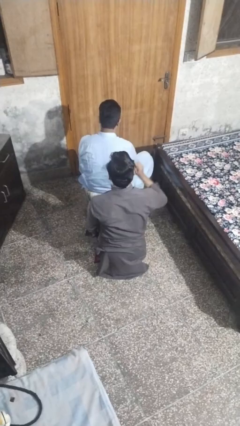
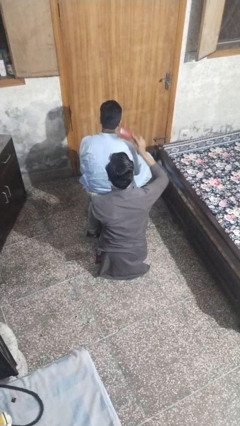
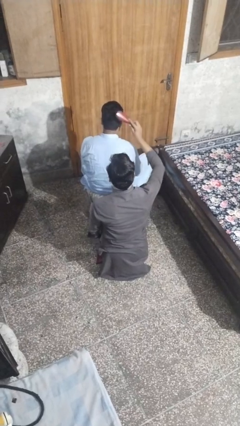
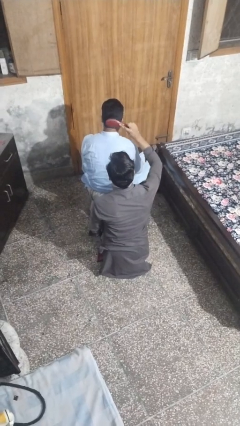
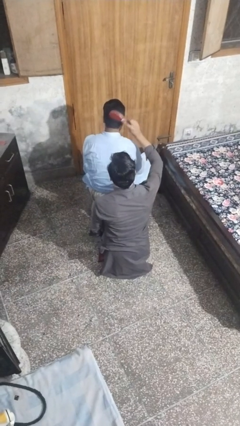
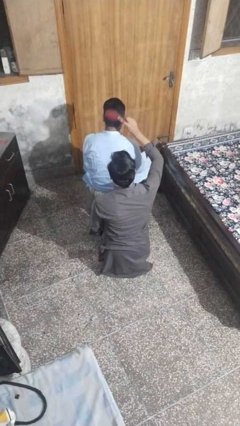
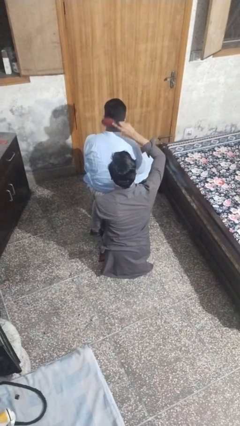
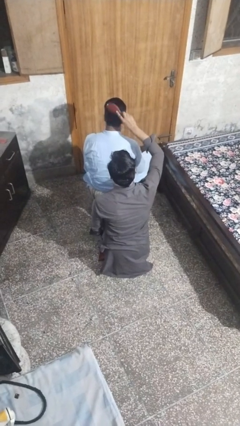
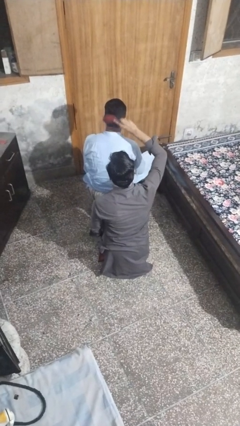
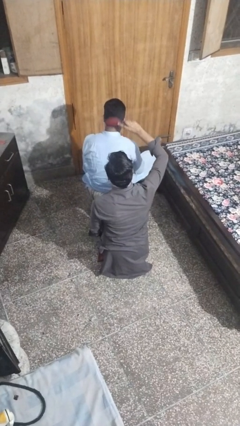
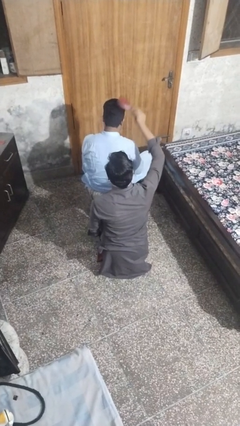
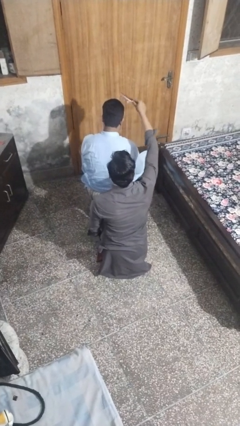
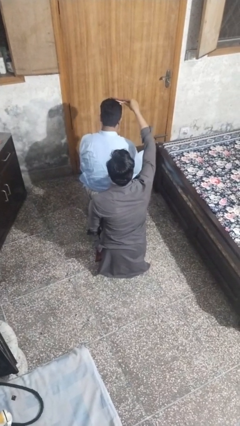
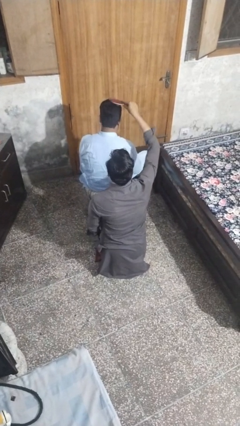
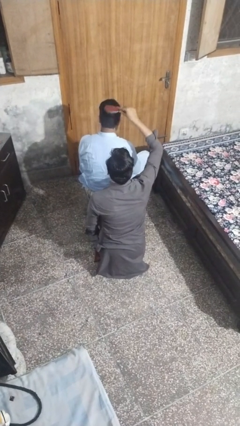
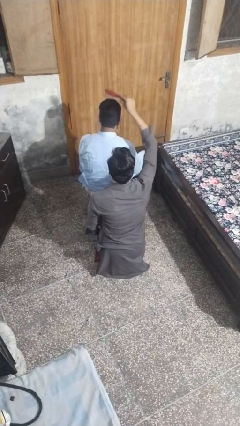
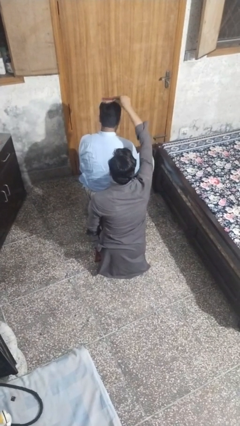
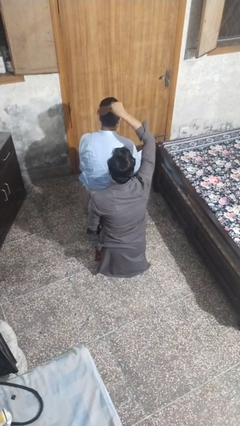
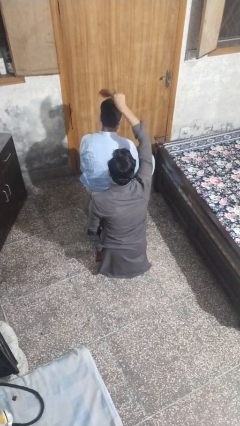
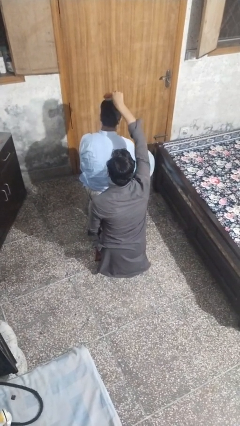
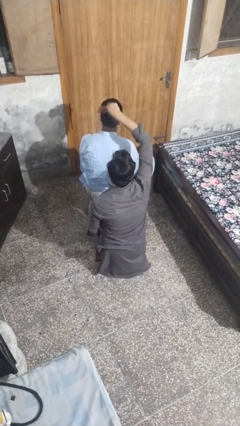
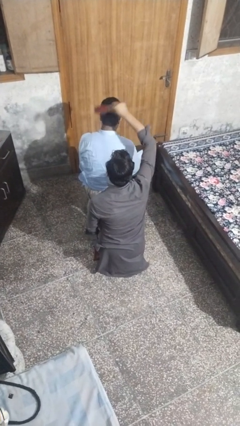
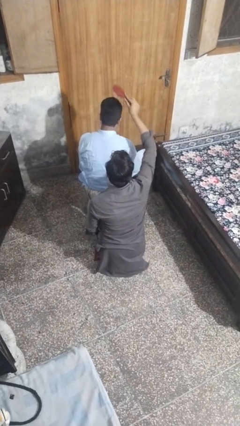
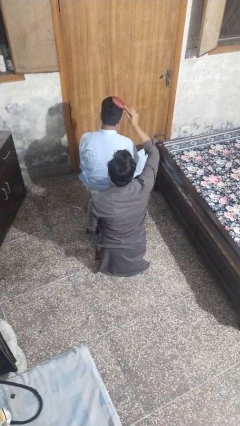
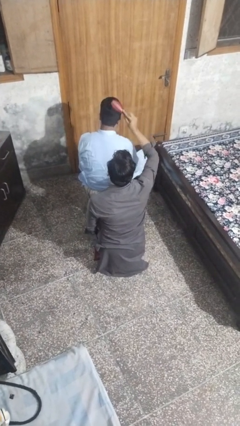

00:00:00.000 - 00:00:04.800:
person brushes hair of person

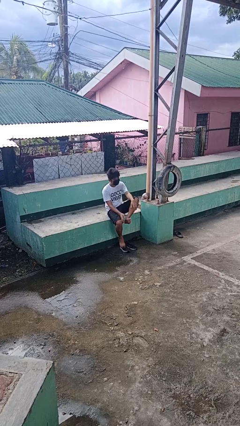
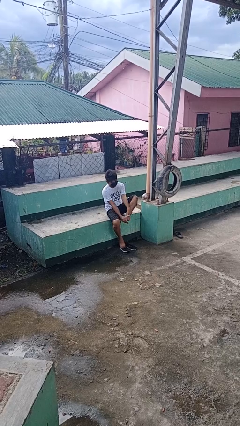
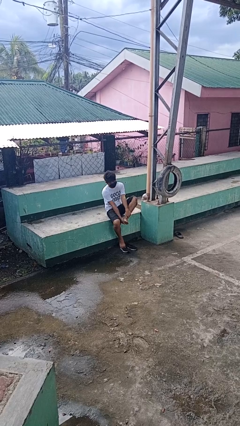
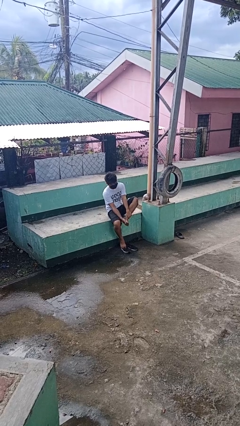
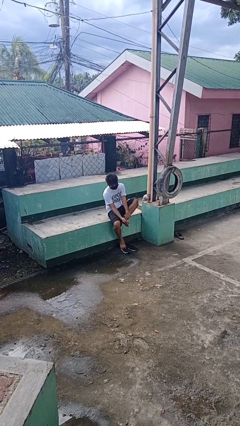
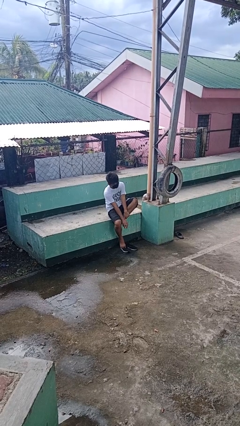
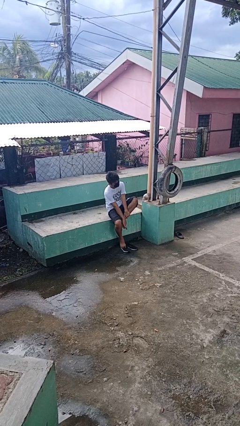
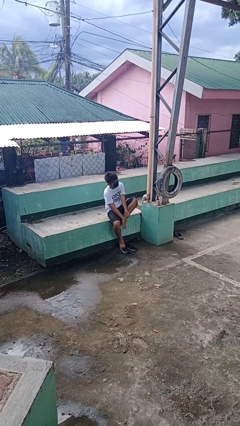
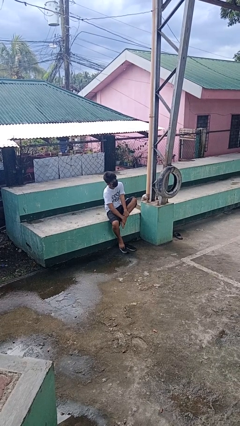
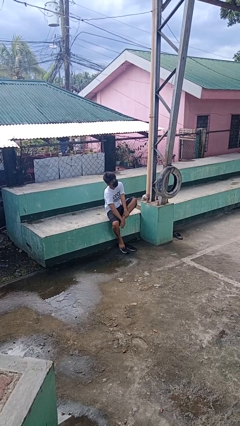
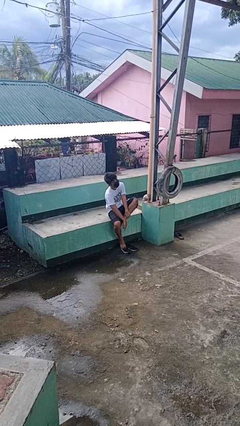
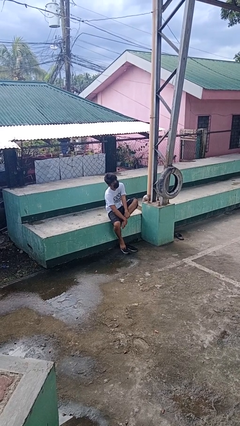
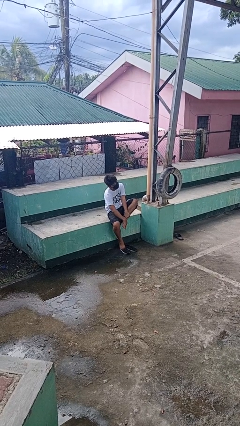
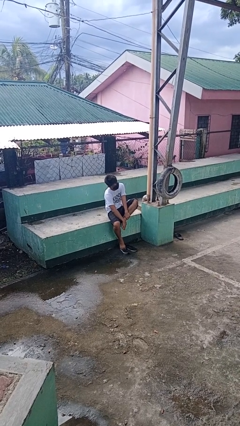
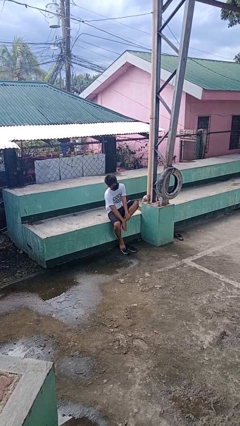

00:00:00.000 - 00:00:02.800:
person rubs foot

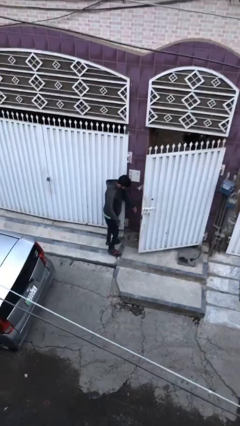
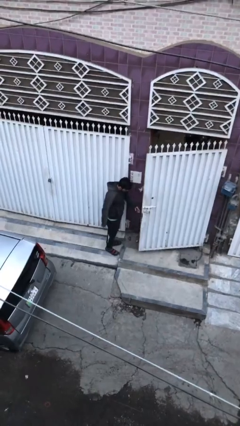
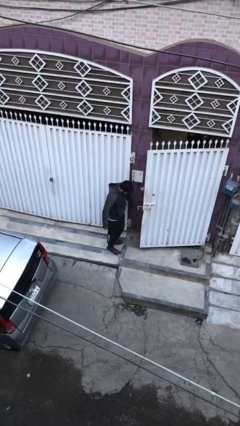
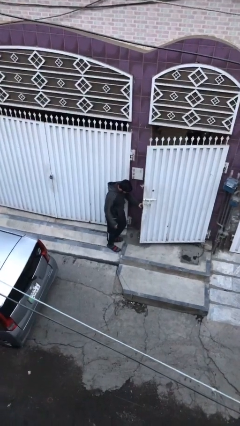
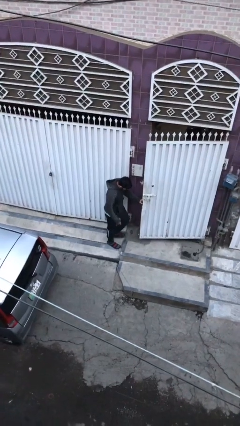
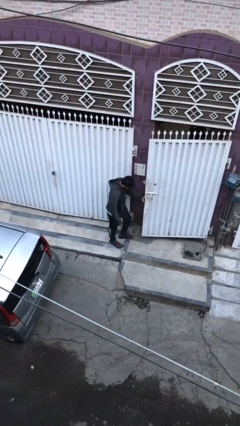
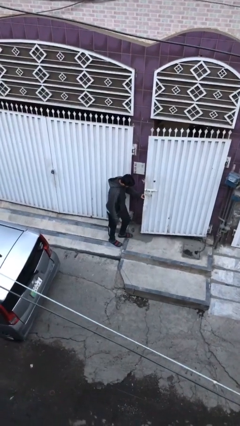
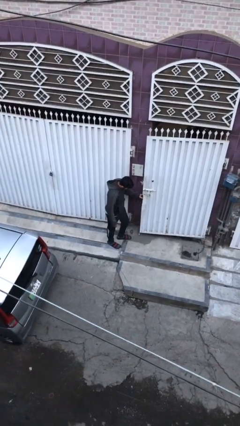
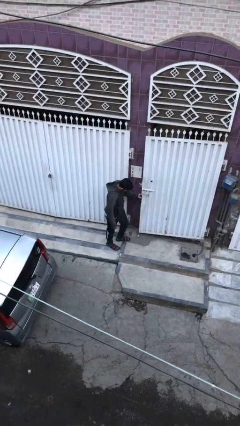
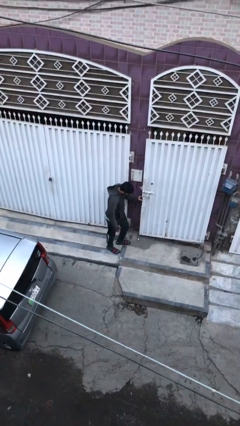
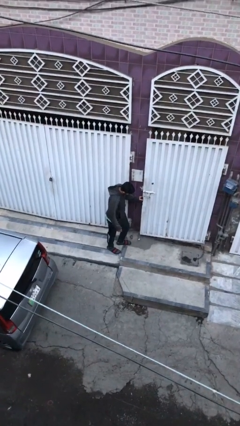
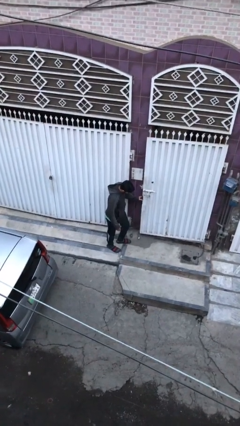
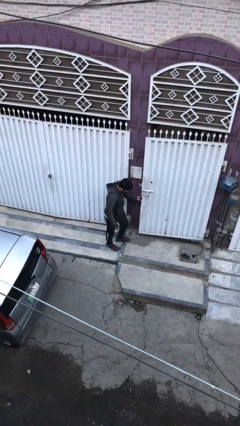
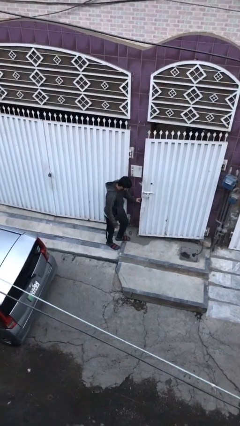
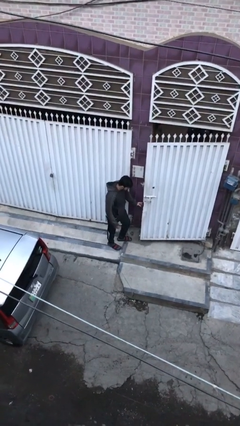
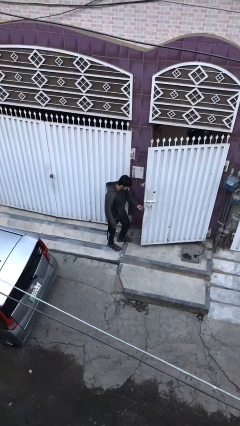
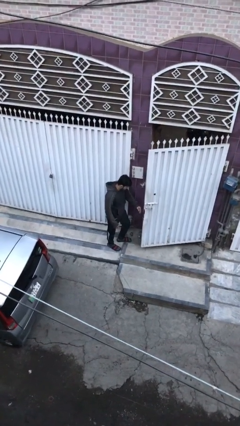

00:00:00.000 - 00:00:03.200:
person closes facility door

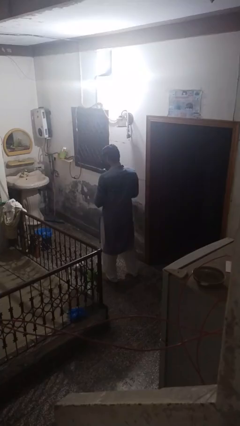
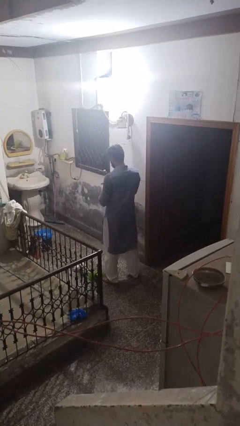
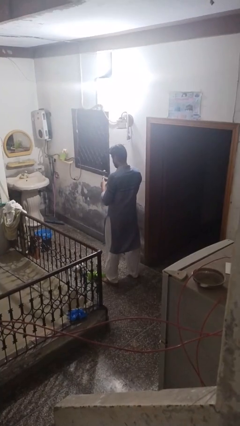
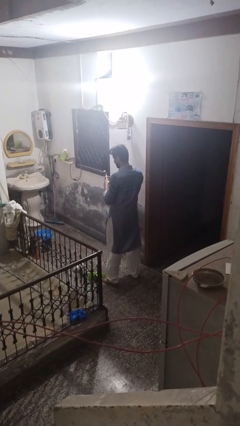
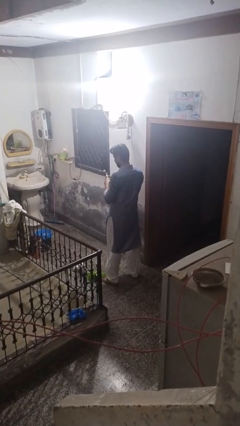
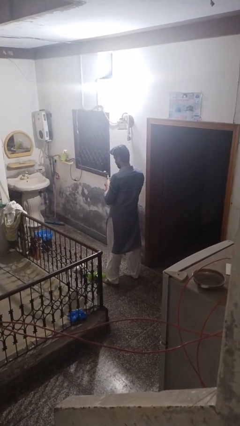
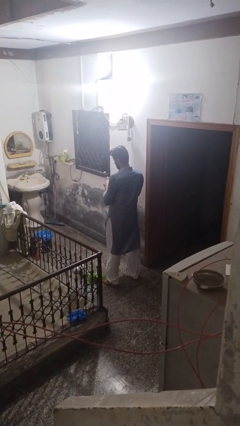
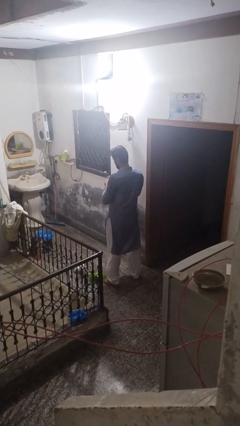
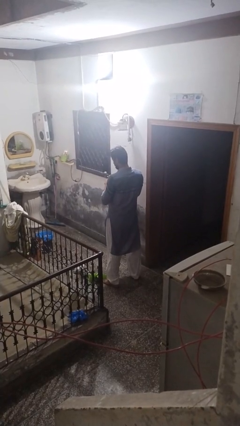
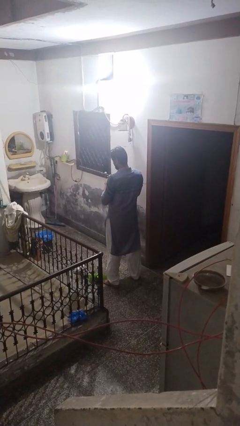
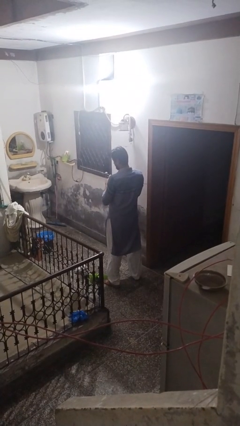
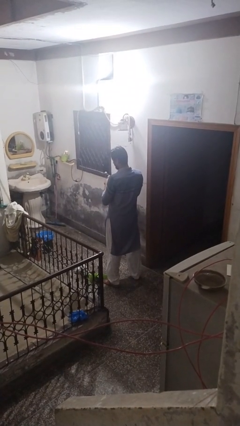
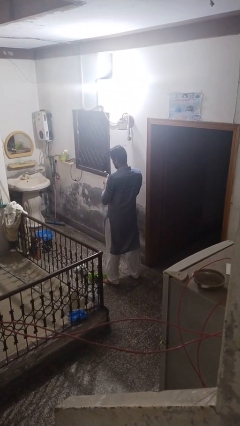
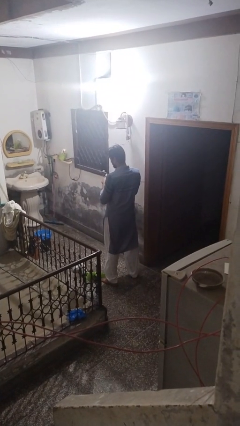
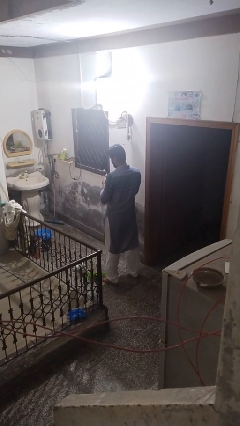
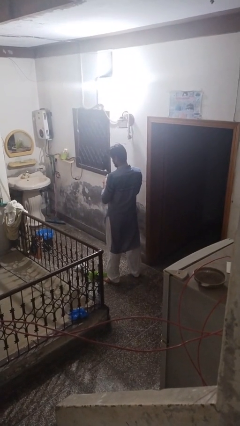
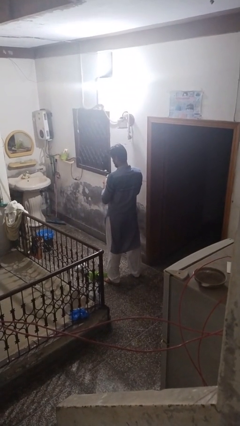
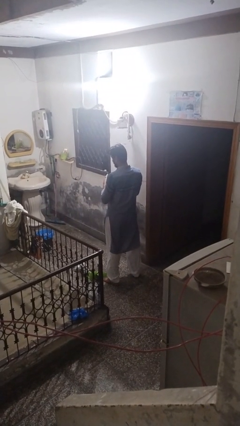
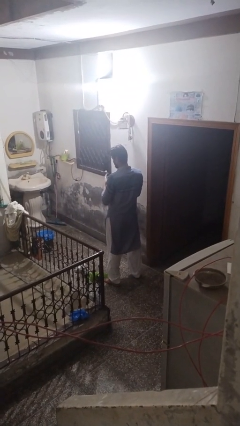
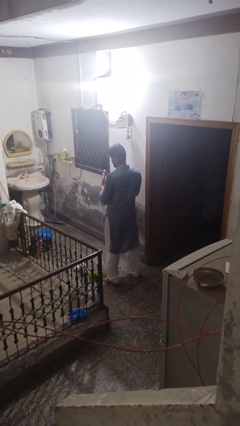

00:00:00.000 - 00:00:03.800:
person puts on ring

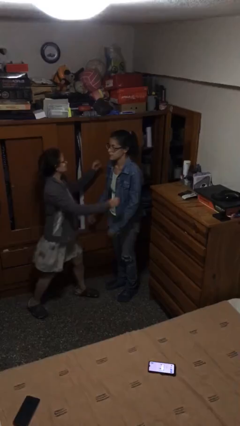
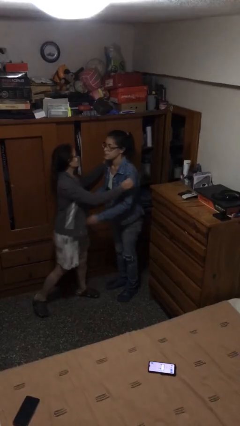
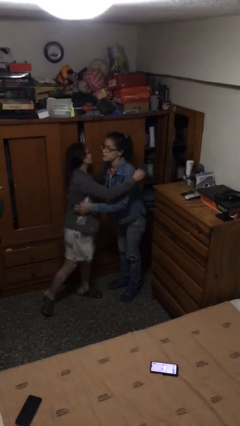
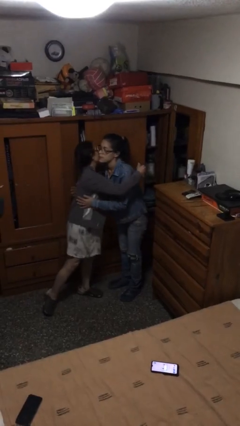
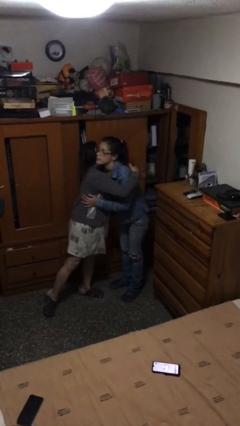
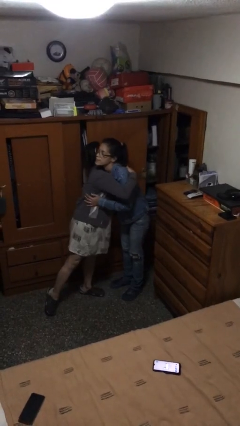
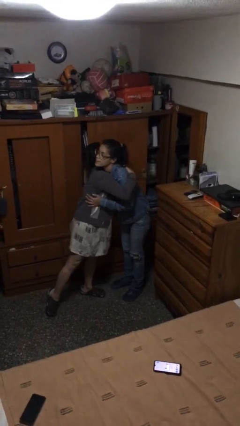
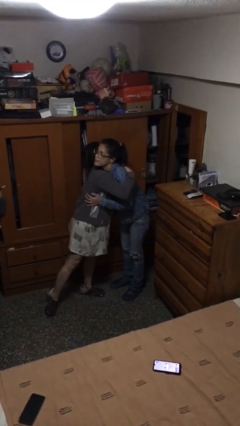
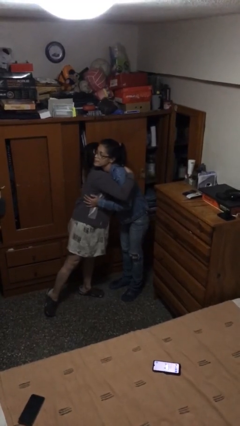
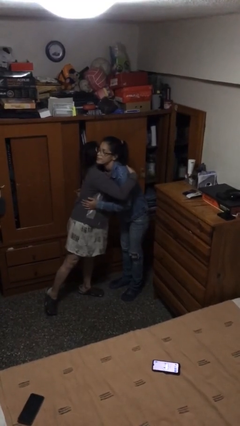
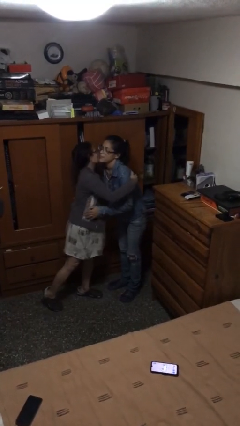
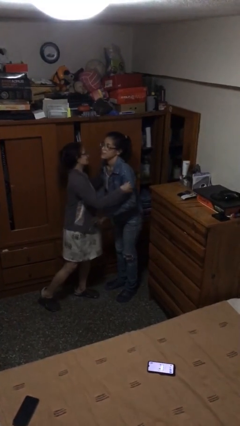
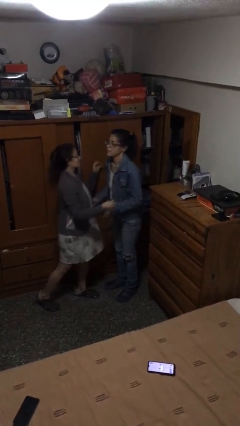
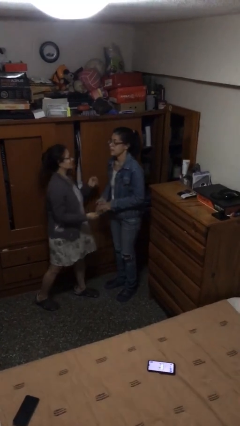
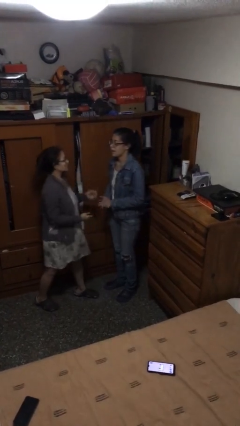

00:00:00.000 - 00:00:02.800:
person embraces person

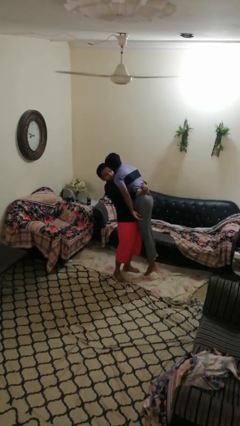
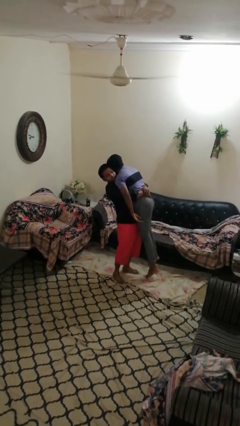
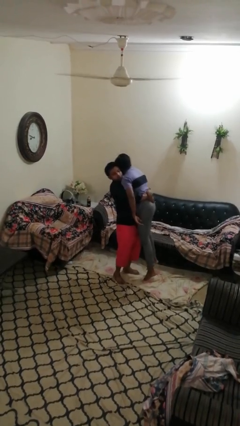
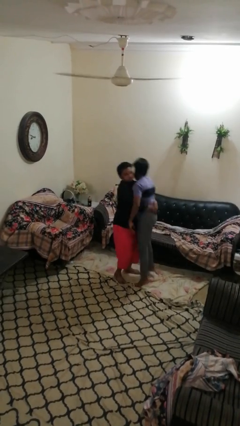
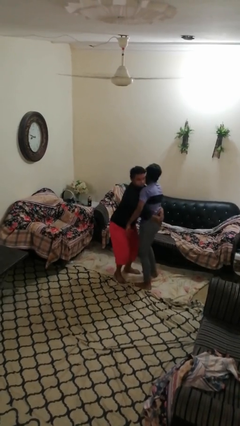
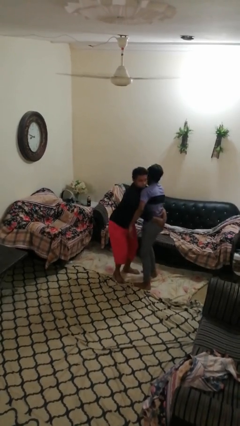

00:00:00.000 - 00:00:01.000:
person puts down person
